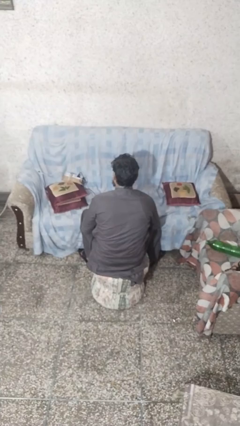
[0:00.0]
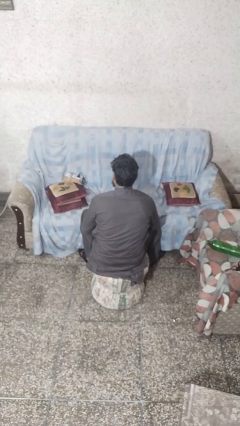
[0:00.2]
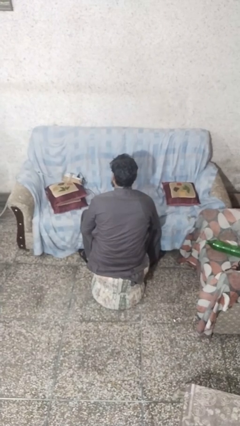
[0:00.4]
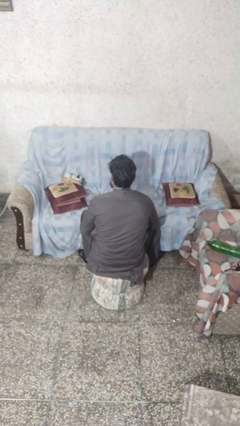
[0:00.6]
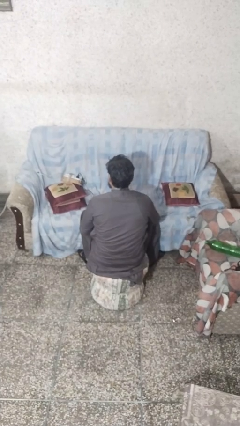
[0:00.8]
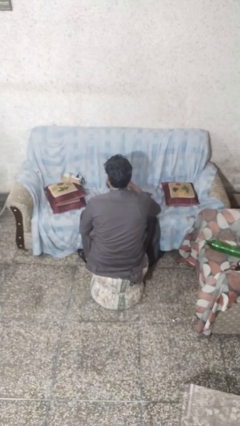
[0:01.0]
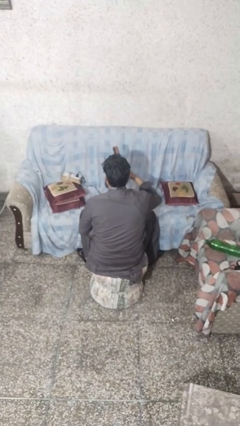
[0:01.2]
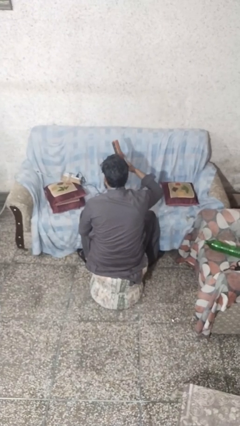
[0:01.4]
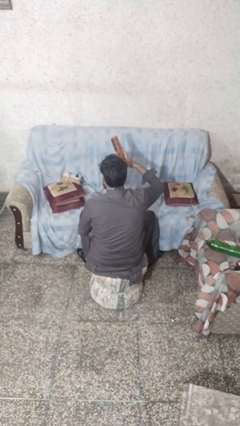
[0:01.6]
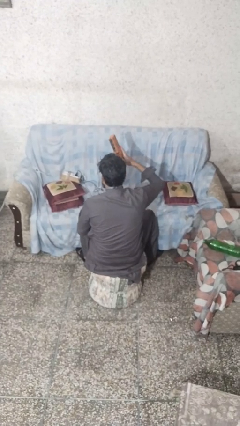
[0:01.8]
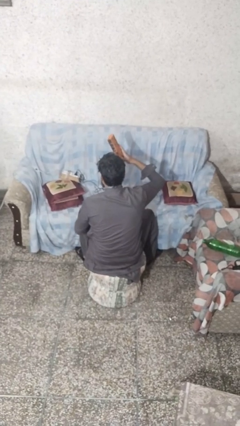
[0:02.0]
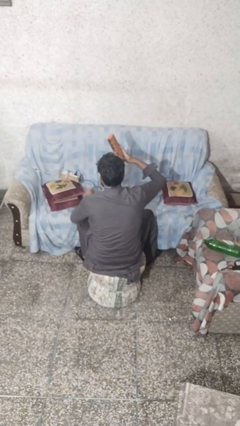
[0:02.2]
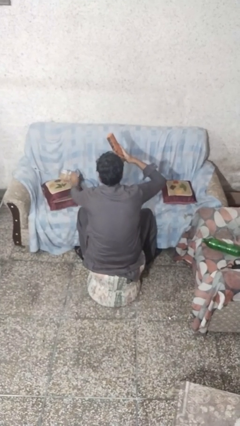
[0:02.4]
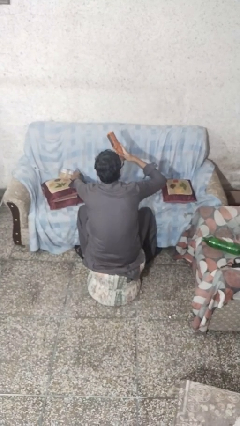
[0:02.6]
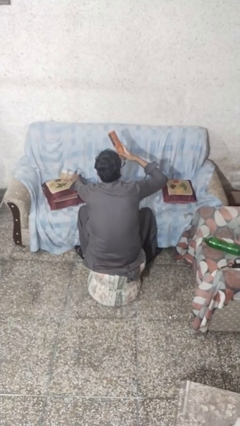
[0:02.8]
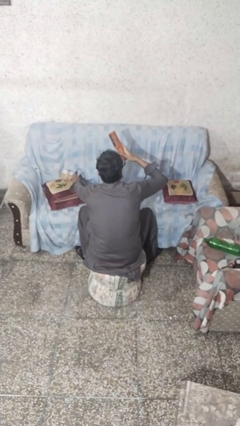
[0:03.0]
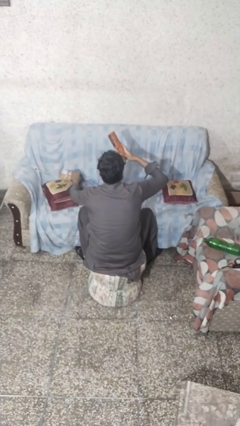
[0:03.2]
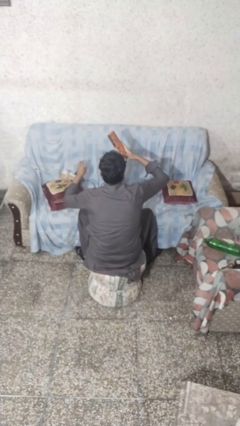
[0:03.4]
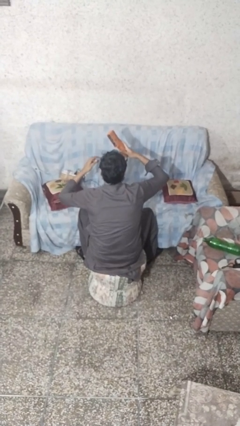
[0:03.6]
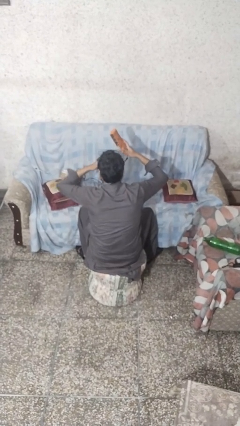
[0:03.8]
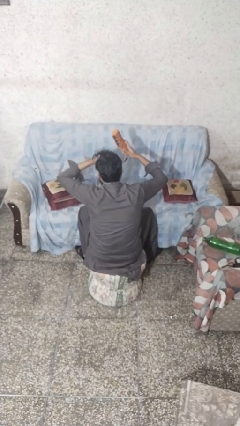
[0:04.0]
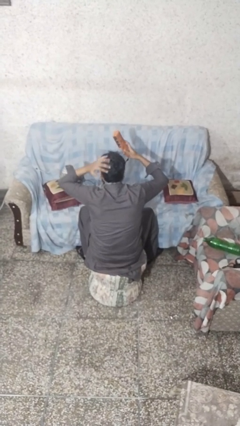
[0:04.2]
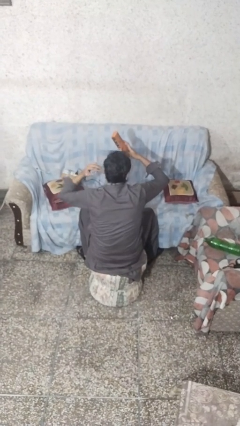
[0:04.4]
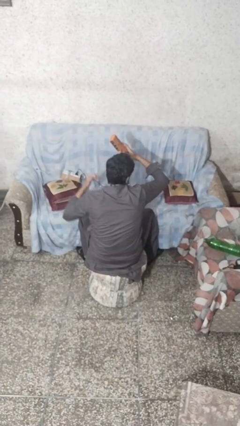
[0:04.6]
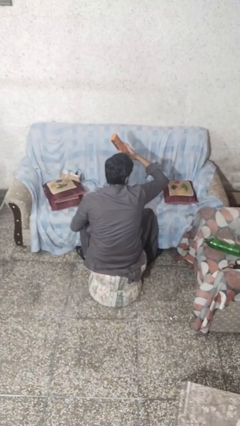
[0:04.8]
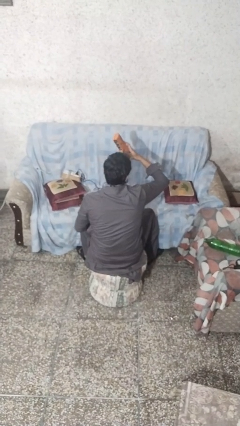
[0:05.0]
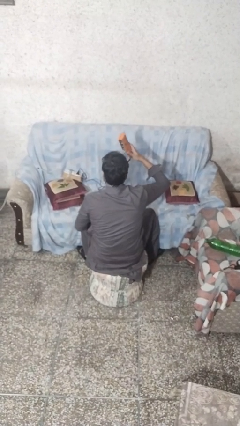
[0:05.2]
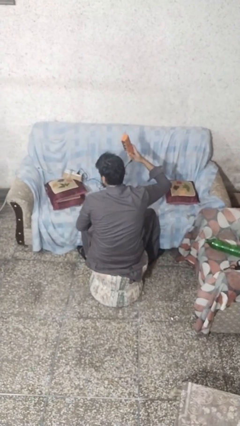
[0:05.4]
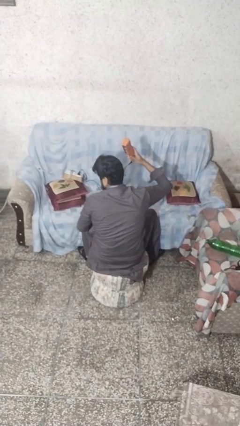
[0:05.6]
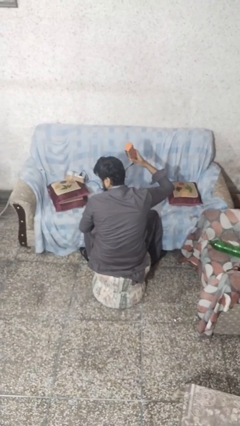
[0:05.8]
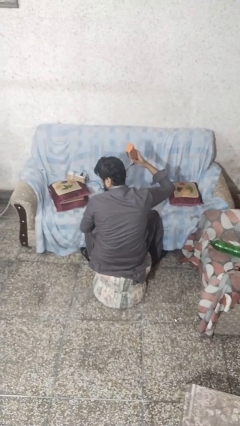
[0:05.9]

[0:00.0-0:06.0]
person dries hair with hairdryer

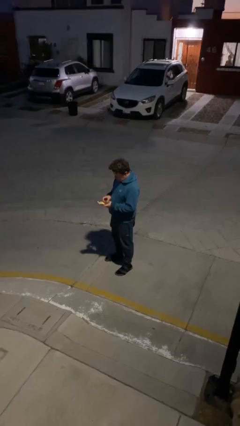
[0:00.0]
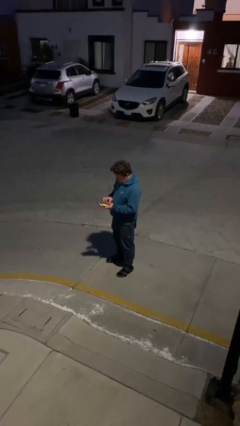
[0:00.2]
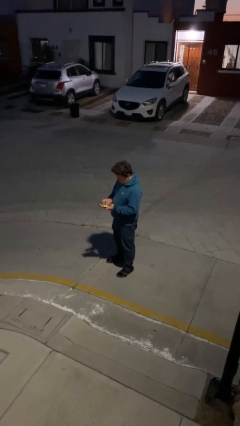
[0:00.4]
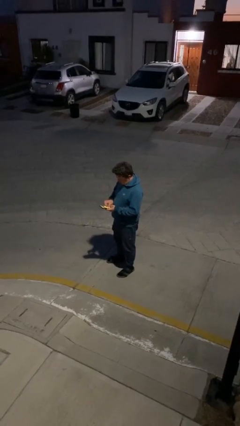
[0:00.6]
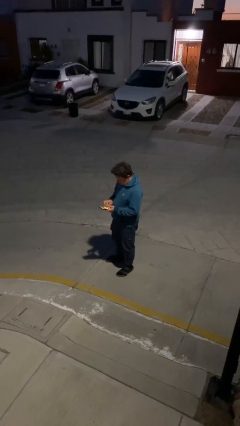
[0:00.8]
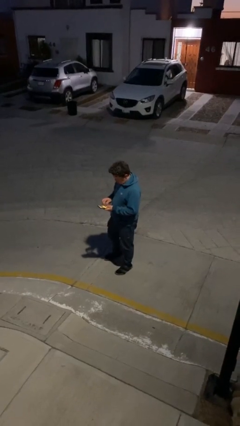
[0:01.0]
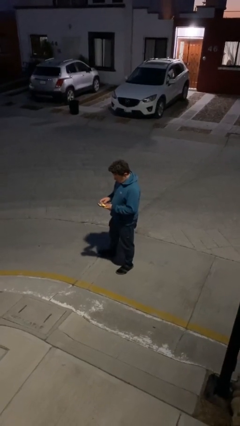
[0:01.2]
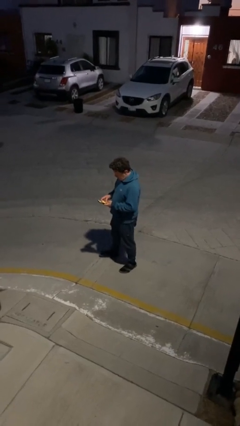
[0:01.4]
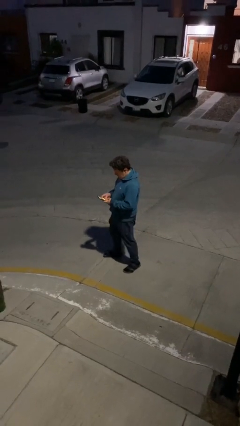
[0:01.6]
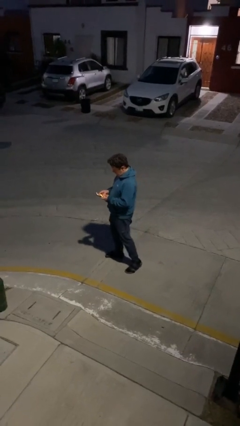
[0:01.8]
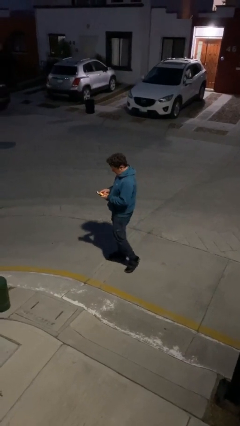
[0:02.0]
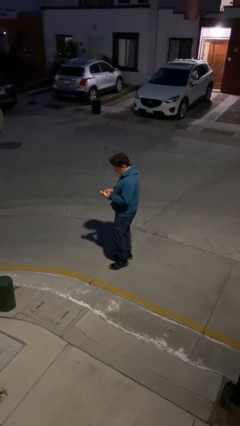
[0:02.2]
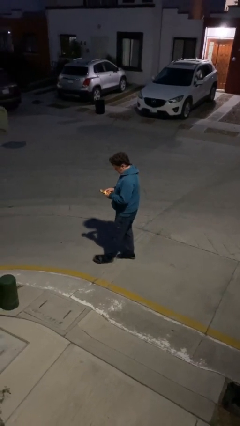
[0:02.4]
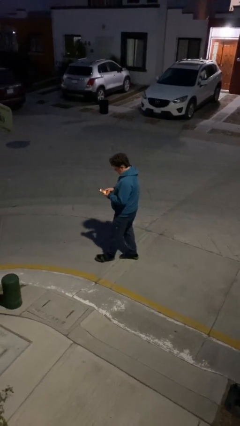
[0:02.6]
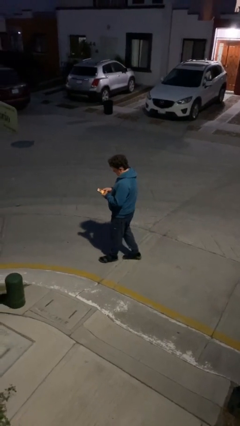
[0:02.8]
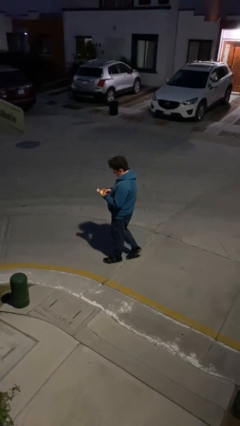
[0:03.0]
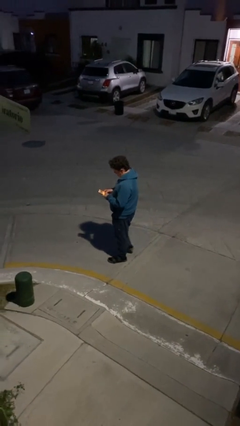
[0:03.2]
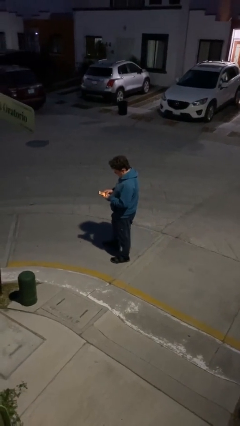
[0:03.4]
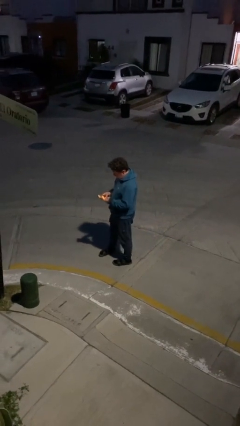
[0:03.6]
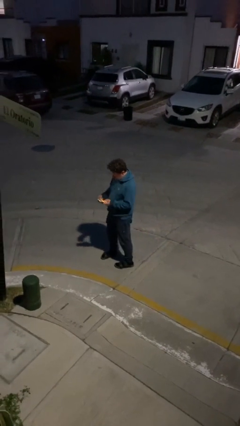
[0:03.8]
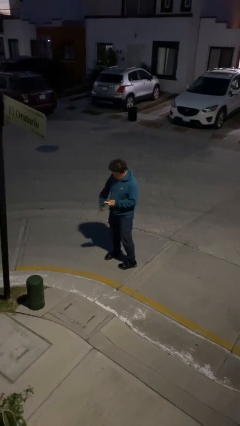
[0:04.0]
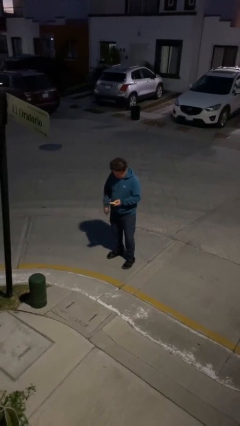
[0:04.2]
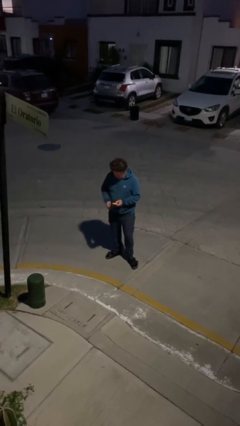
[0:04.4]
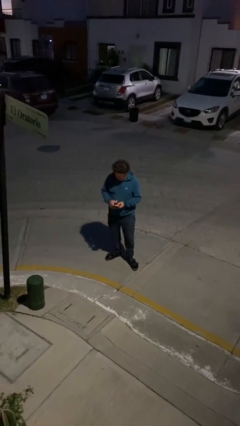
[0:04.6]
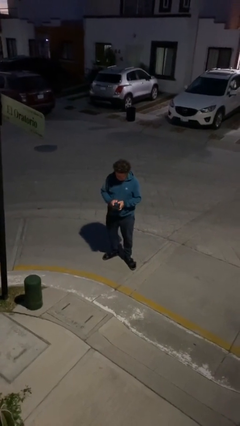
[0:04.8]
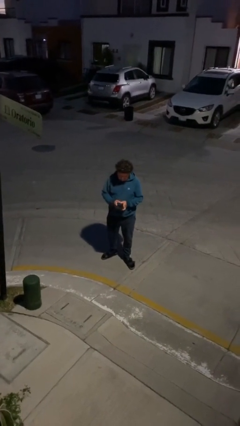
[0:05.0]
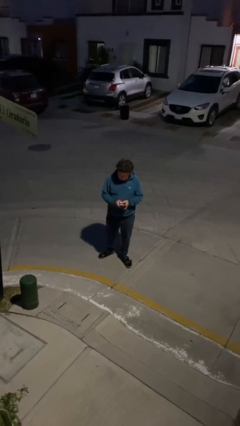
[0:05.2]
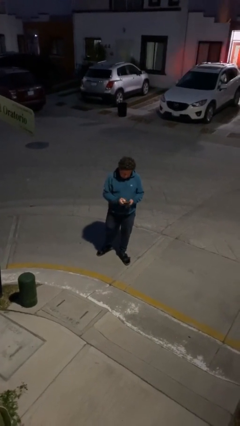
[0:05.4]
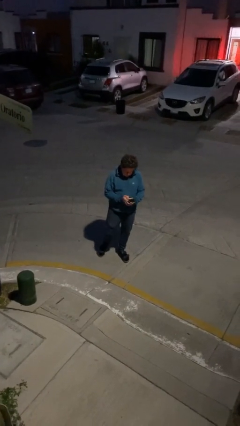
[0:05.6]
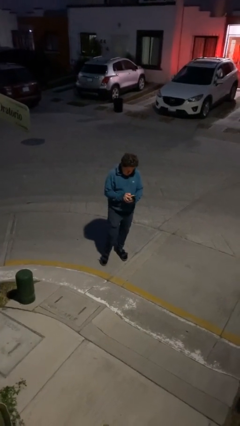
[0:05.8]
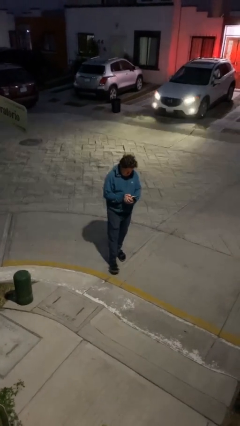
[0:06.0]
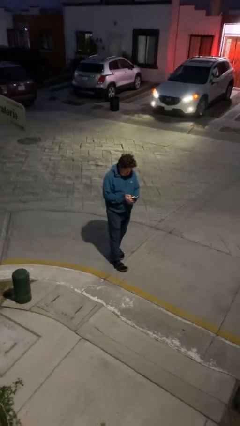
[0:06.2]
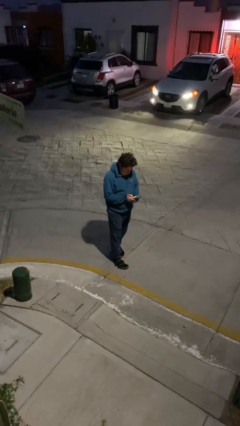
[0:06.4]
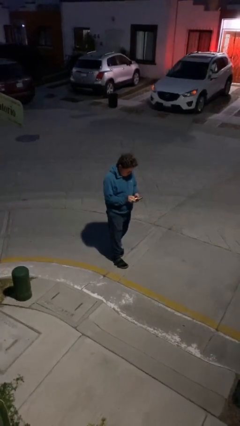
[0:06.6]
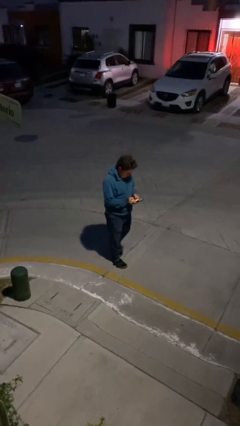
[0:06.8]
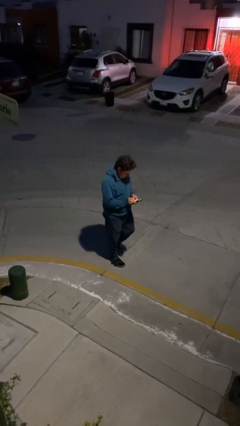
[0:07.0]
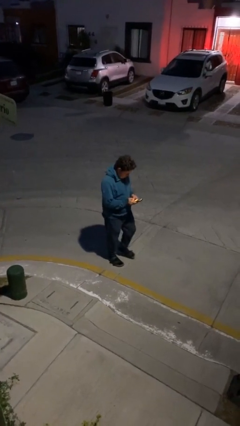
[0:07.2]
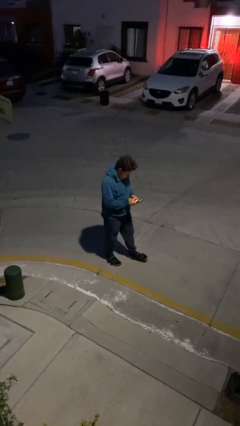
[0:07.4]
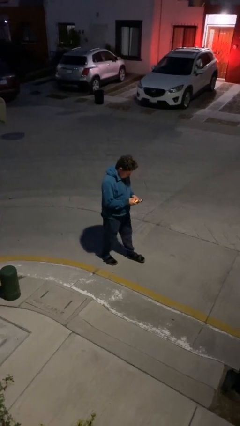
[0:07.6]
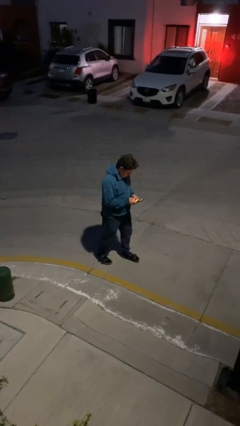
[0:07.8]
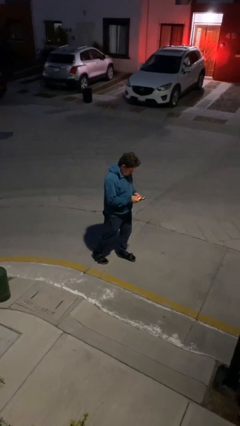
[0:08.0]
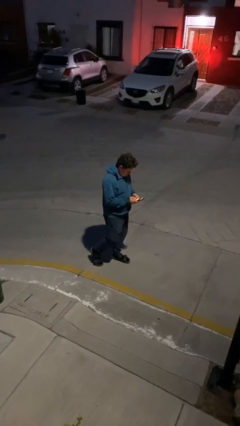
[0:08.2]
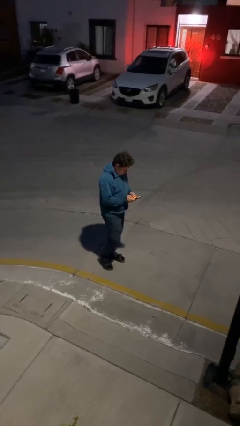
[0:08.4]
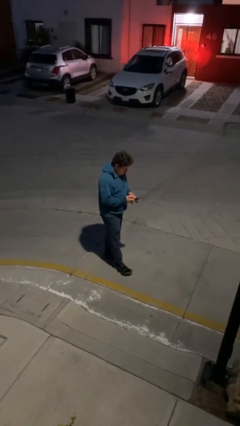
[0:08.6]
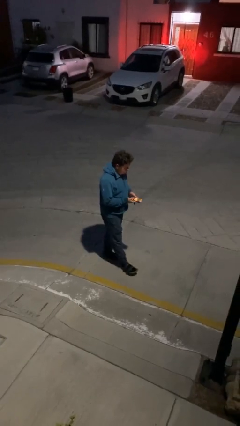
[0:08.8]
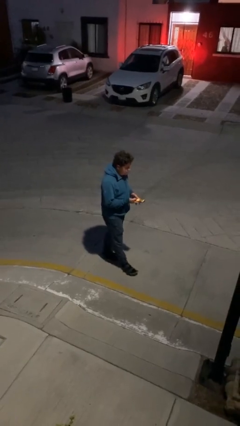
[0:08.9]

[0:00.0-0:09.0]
person texts on phone

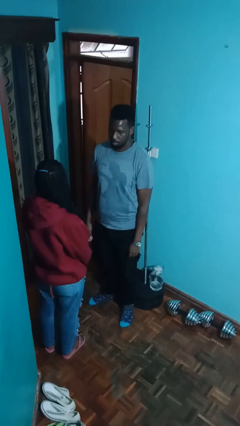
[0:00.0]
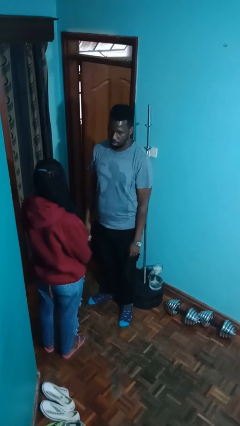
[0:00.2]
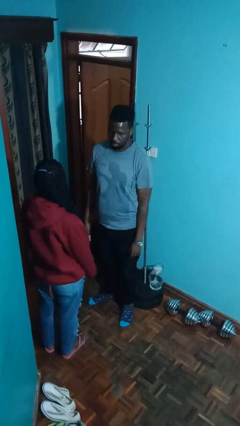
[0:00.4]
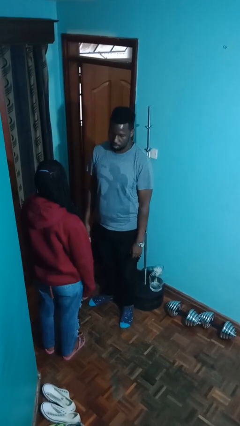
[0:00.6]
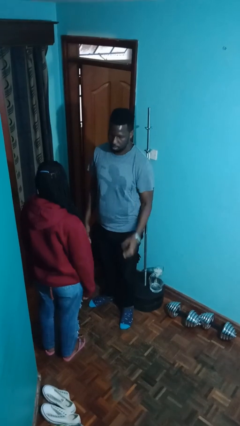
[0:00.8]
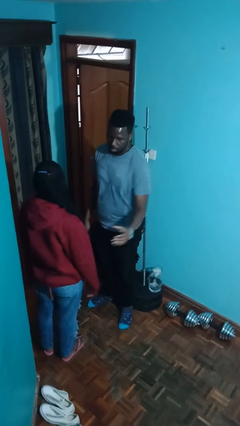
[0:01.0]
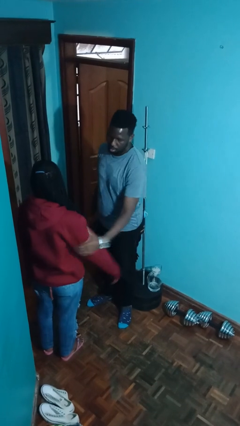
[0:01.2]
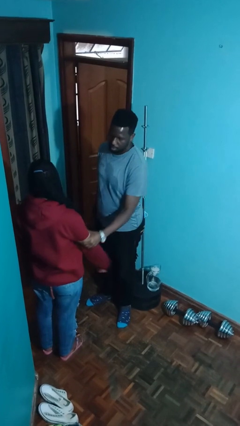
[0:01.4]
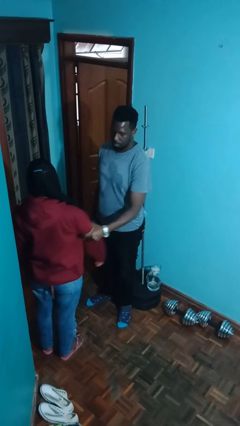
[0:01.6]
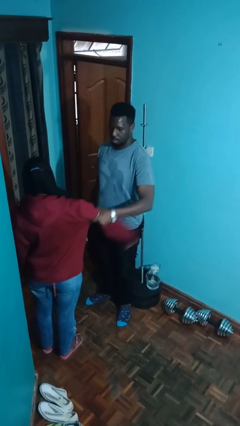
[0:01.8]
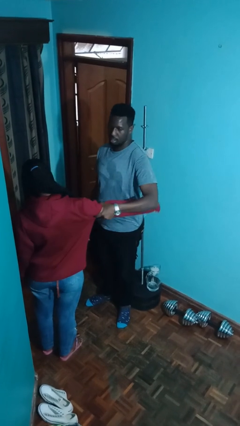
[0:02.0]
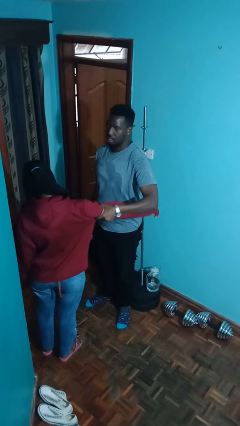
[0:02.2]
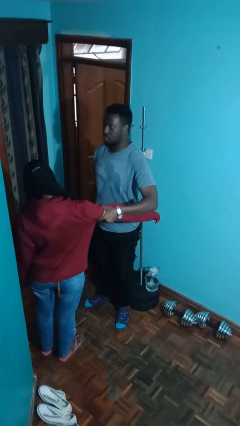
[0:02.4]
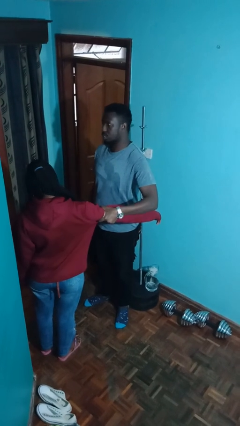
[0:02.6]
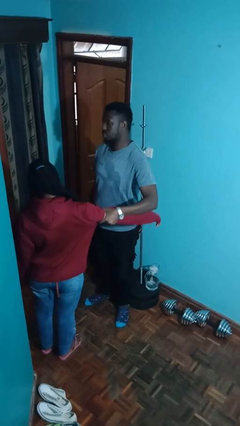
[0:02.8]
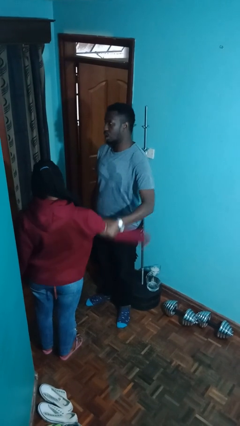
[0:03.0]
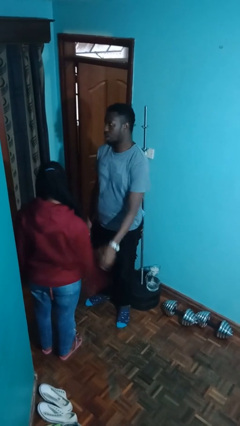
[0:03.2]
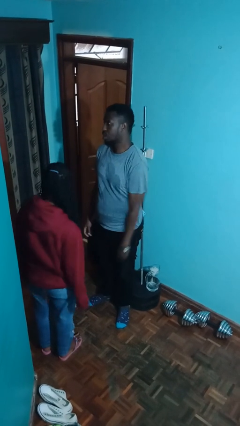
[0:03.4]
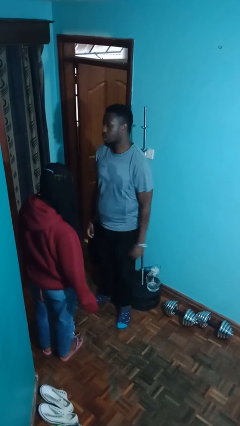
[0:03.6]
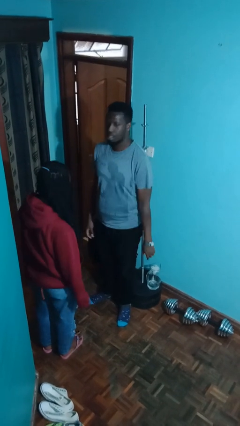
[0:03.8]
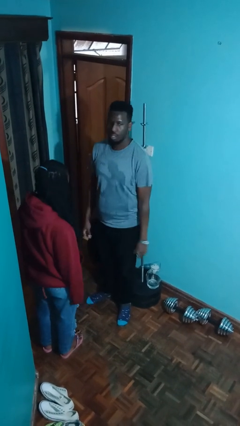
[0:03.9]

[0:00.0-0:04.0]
person grabs person by bicep
